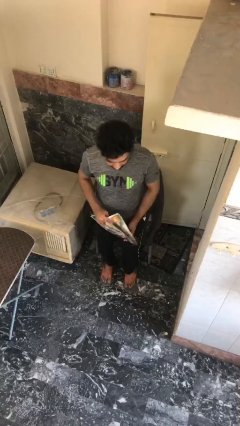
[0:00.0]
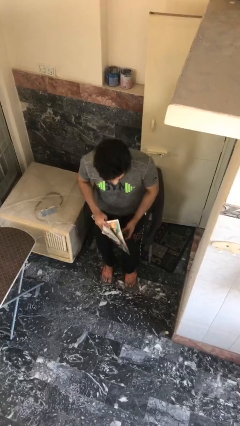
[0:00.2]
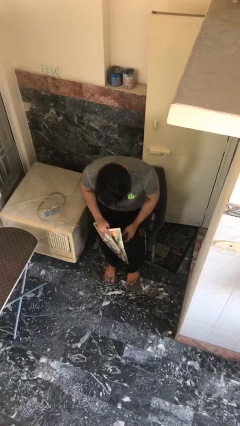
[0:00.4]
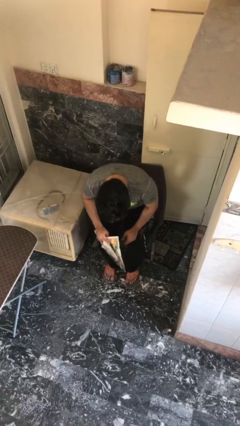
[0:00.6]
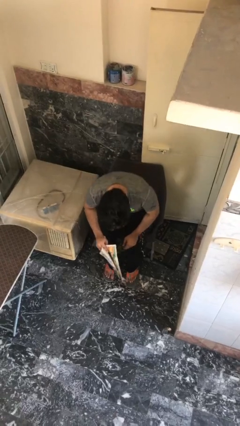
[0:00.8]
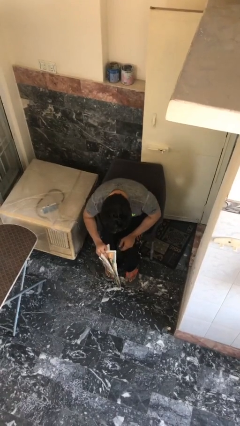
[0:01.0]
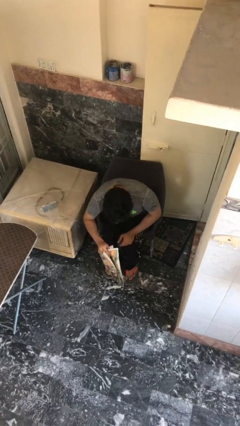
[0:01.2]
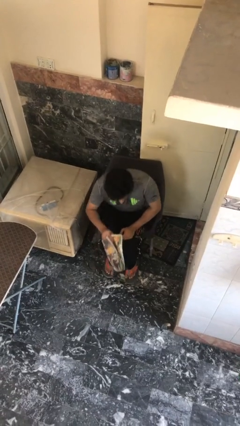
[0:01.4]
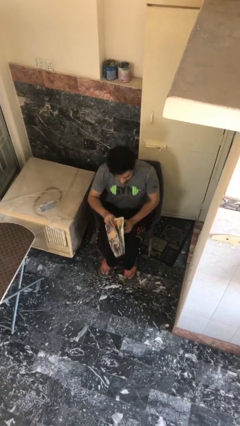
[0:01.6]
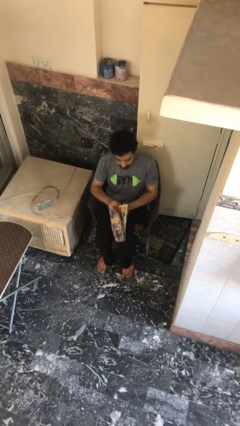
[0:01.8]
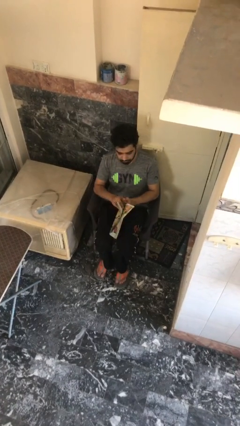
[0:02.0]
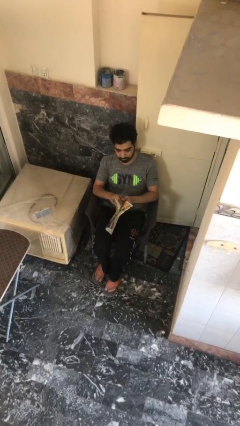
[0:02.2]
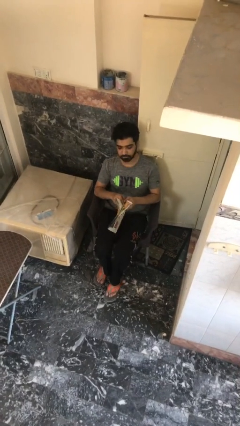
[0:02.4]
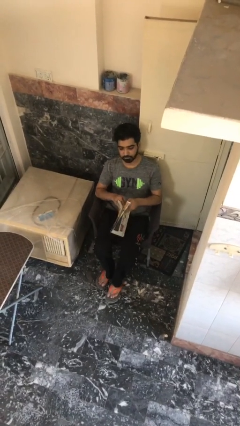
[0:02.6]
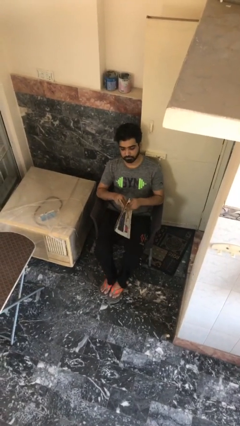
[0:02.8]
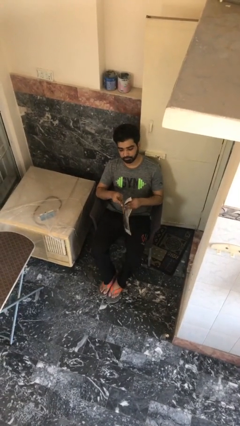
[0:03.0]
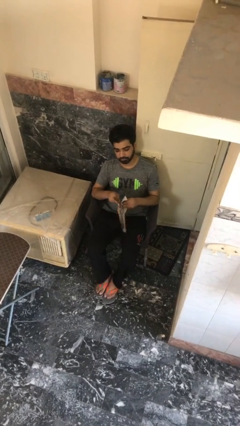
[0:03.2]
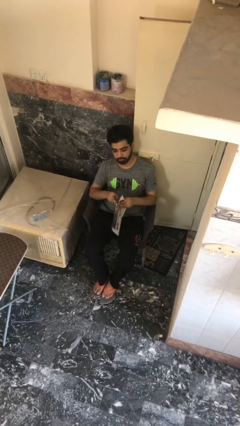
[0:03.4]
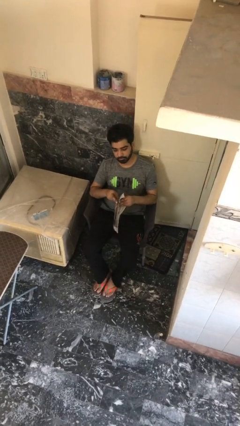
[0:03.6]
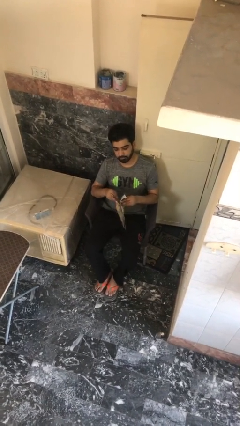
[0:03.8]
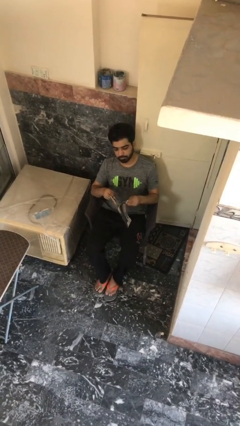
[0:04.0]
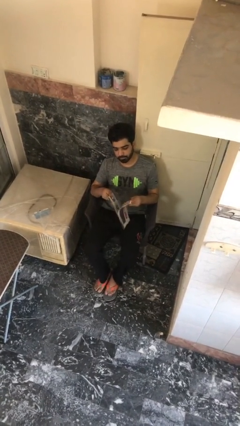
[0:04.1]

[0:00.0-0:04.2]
person sits down

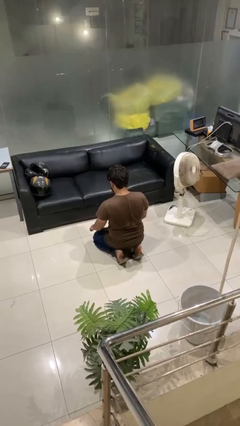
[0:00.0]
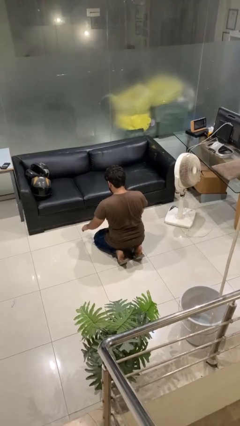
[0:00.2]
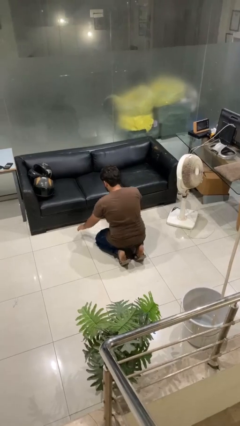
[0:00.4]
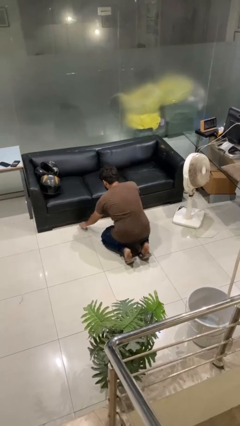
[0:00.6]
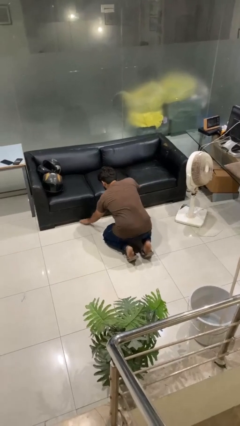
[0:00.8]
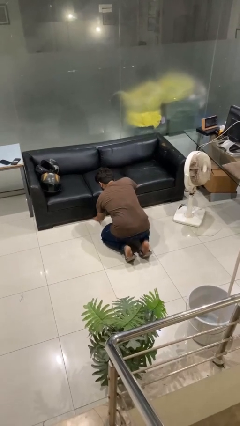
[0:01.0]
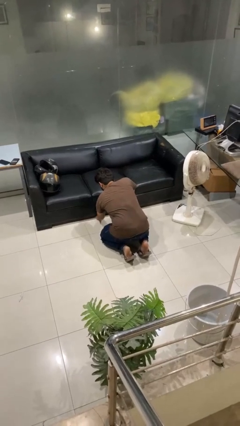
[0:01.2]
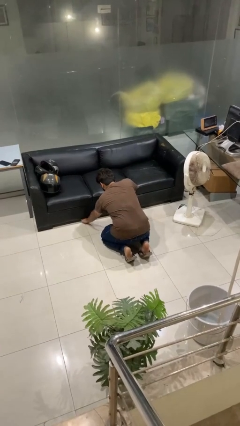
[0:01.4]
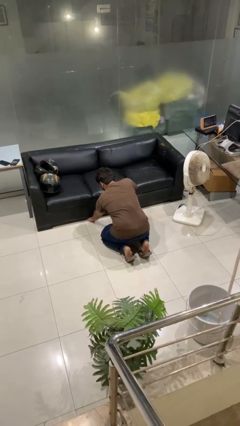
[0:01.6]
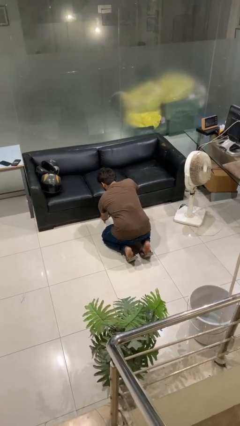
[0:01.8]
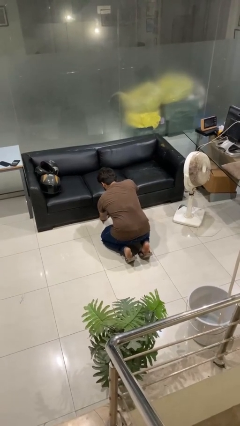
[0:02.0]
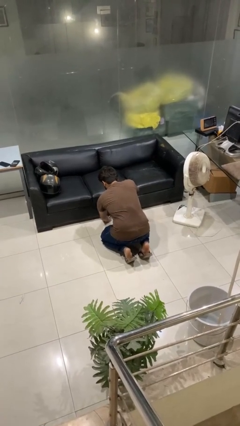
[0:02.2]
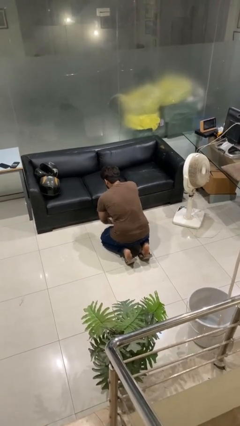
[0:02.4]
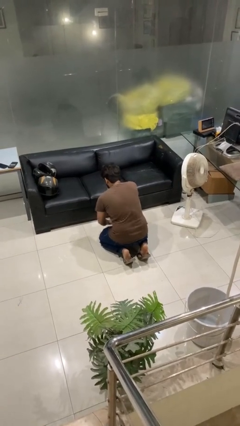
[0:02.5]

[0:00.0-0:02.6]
person searches under couch

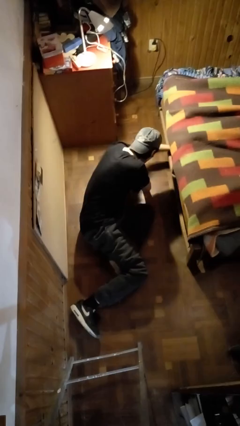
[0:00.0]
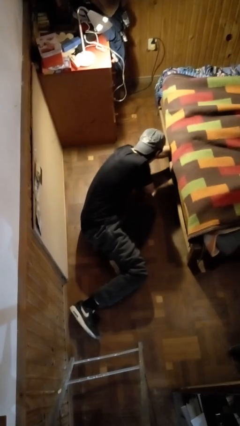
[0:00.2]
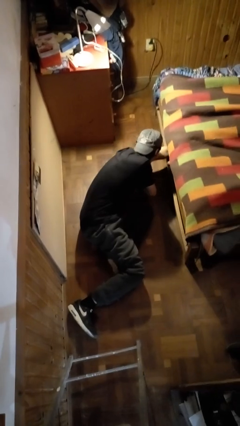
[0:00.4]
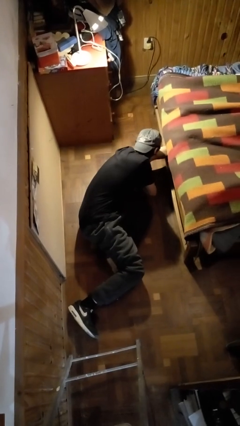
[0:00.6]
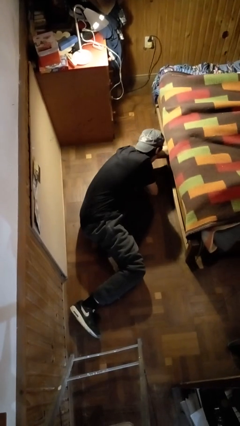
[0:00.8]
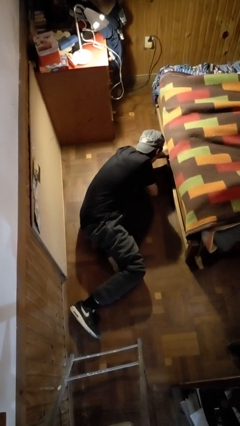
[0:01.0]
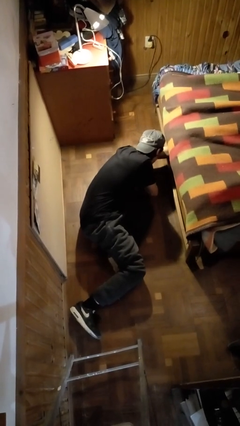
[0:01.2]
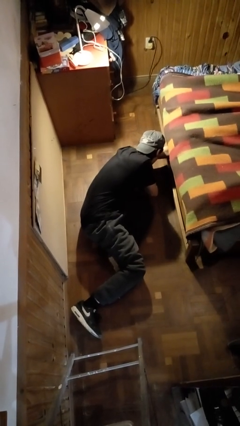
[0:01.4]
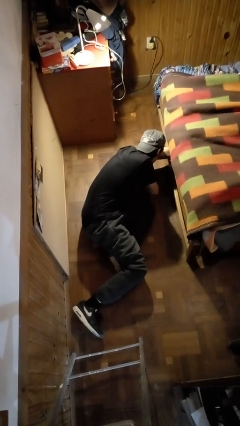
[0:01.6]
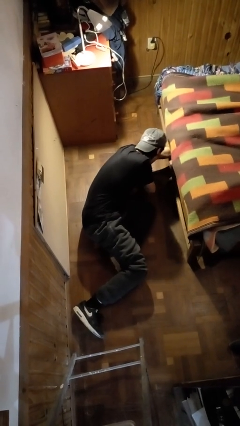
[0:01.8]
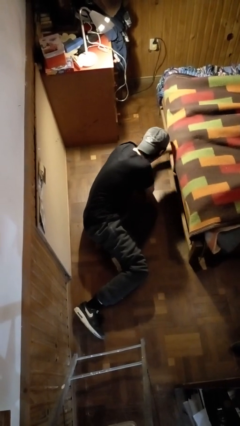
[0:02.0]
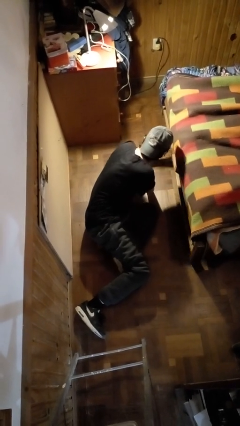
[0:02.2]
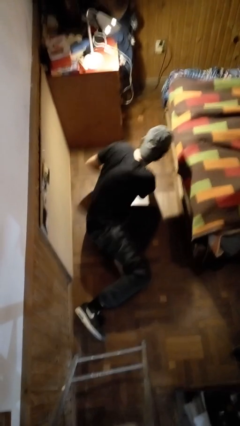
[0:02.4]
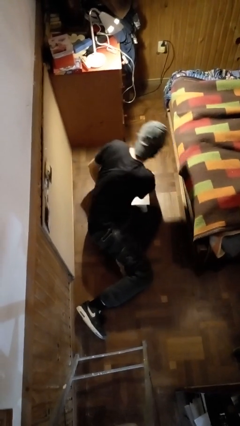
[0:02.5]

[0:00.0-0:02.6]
person searches under bed

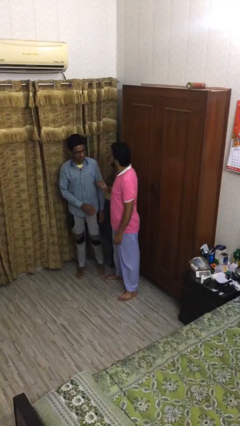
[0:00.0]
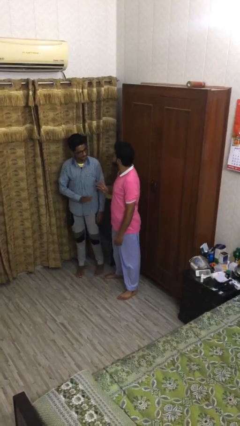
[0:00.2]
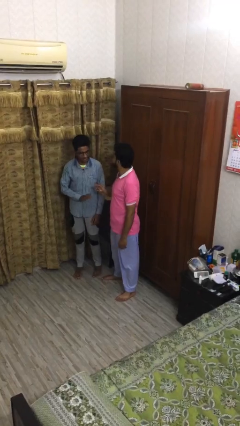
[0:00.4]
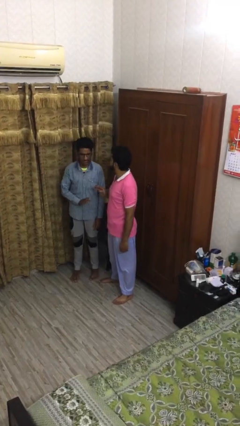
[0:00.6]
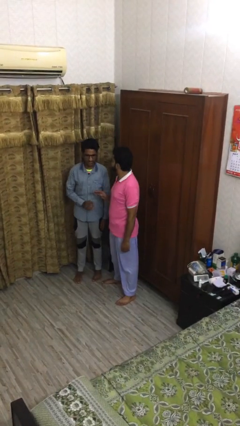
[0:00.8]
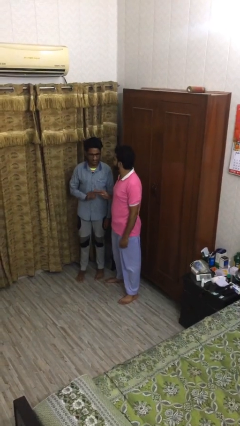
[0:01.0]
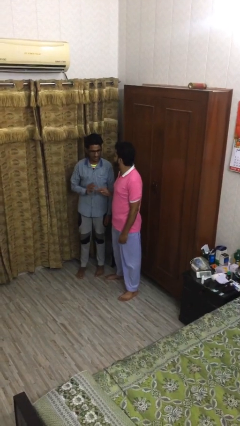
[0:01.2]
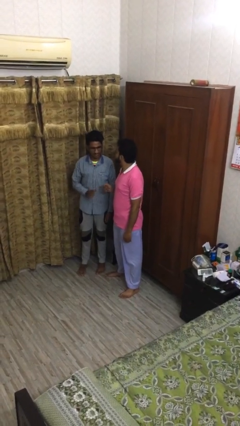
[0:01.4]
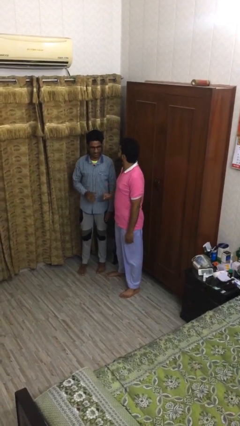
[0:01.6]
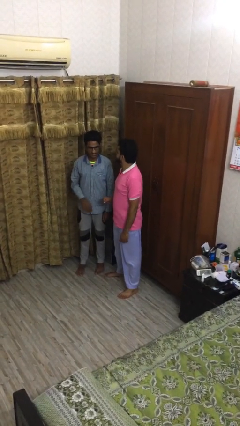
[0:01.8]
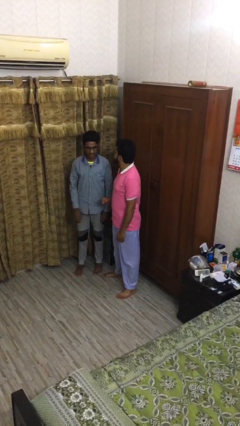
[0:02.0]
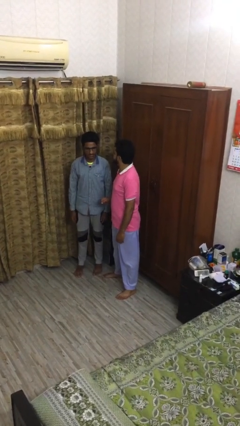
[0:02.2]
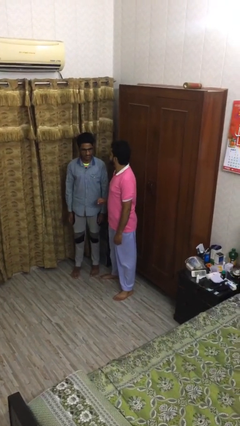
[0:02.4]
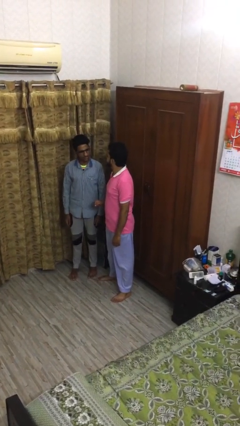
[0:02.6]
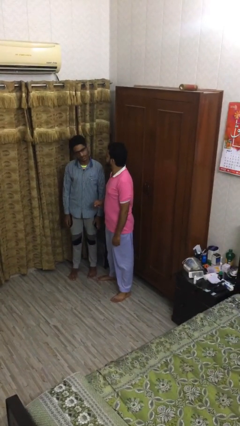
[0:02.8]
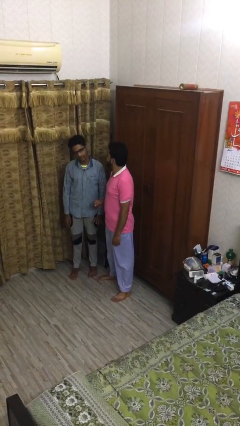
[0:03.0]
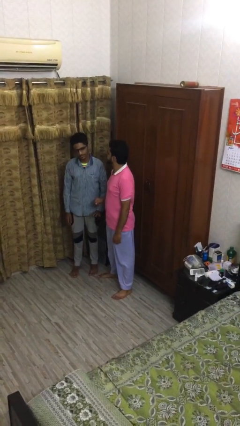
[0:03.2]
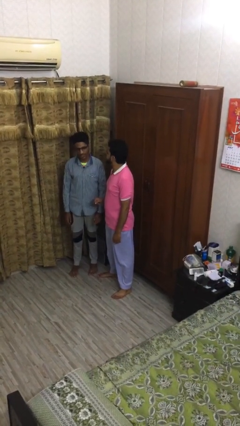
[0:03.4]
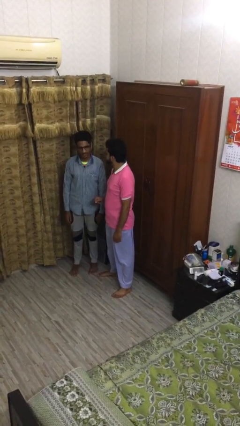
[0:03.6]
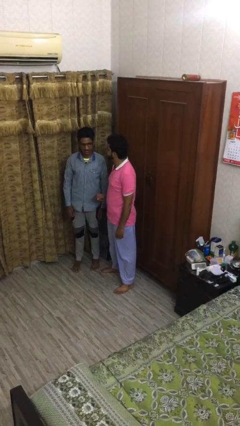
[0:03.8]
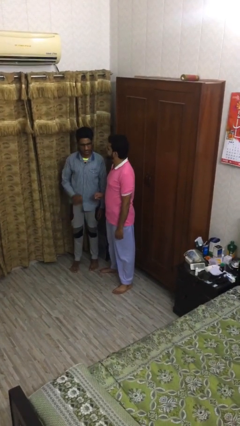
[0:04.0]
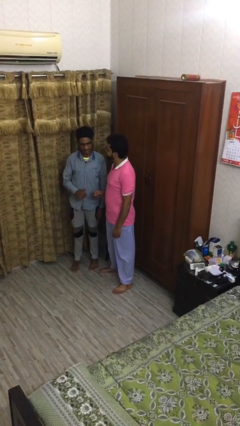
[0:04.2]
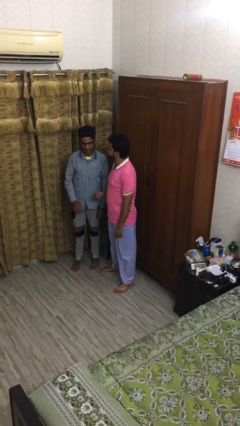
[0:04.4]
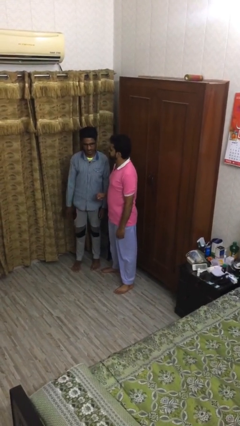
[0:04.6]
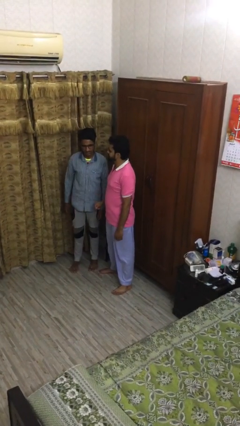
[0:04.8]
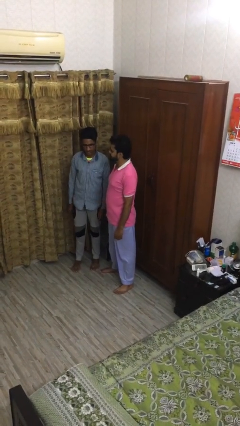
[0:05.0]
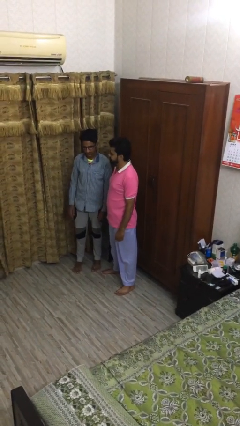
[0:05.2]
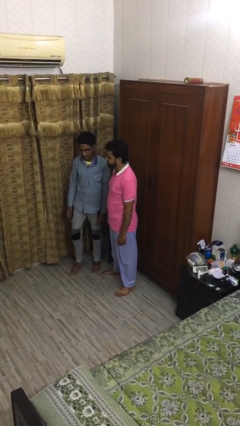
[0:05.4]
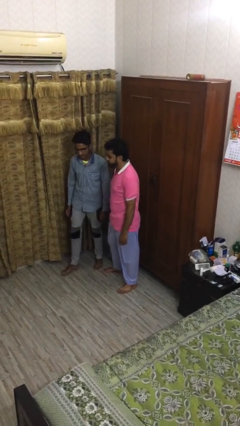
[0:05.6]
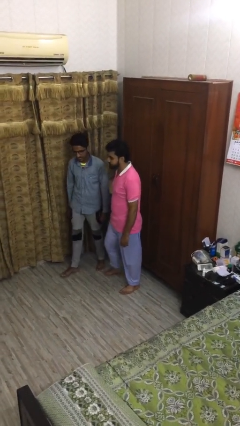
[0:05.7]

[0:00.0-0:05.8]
person talks to person

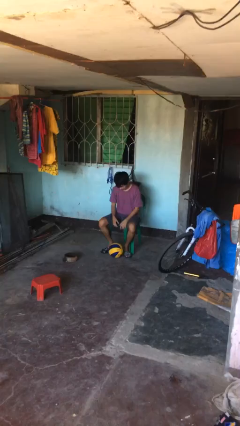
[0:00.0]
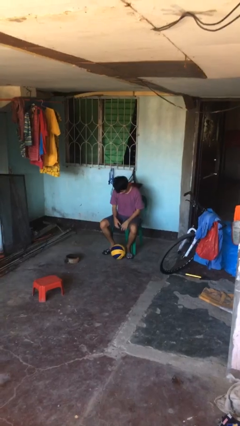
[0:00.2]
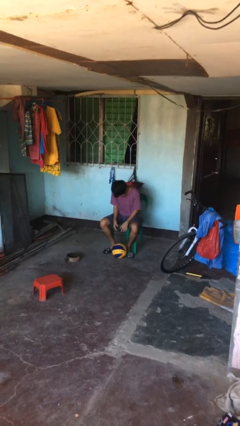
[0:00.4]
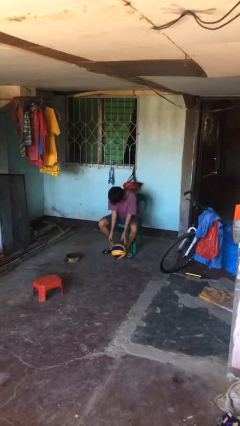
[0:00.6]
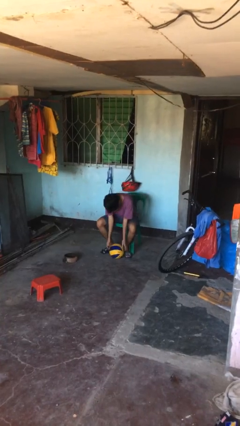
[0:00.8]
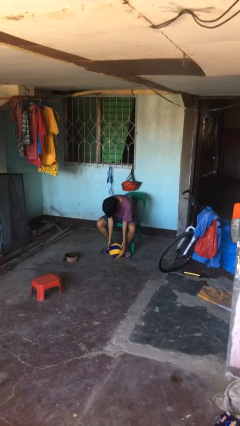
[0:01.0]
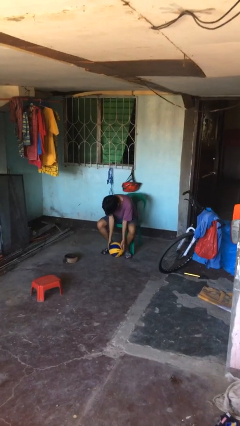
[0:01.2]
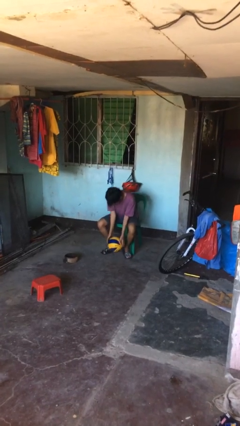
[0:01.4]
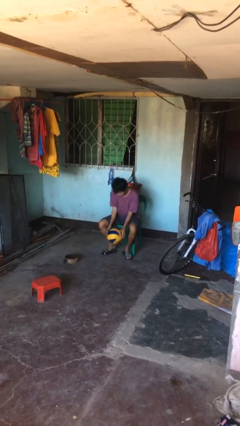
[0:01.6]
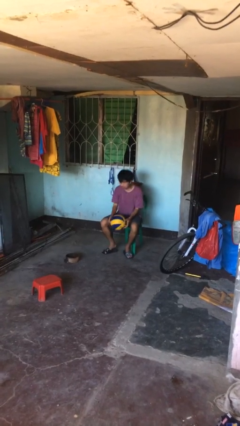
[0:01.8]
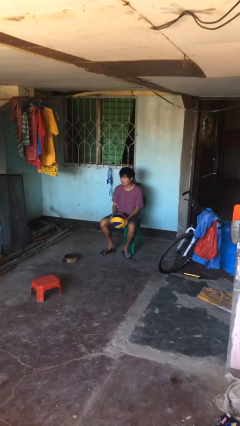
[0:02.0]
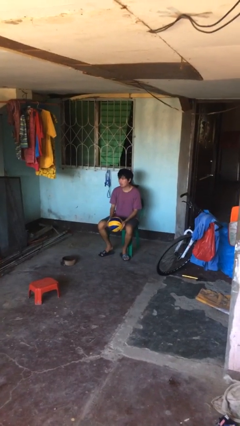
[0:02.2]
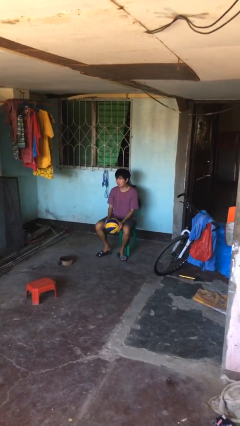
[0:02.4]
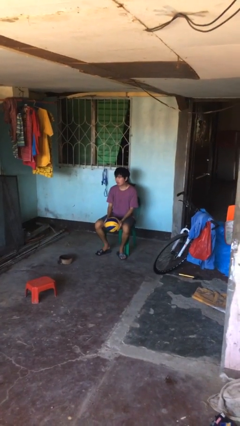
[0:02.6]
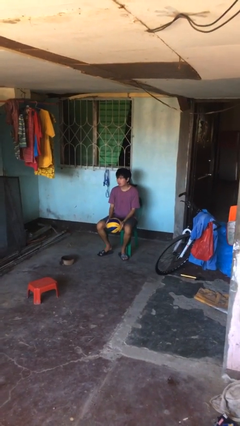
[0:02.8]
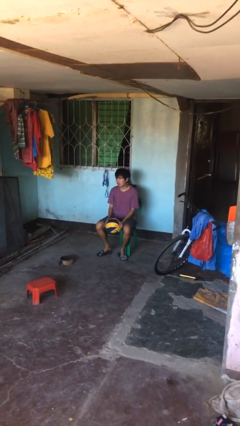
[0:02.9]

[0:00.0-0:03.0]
person picks up object from floor
